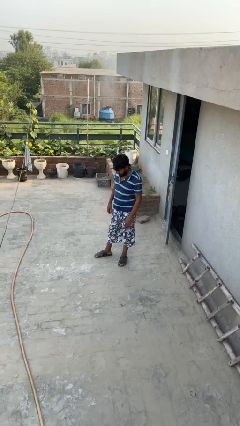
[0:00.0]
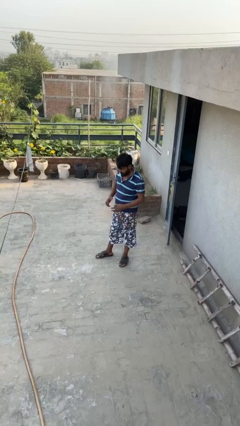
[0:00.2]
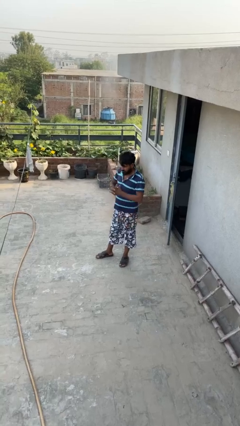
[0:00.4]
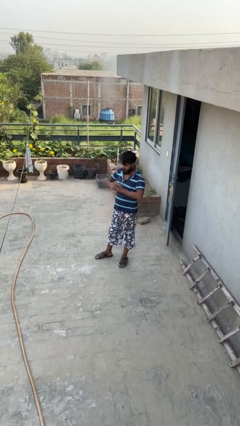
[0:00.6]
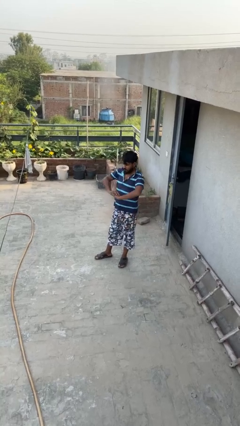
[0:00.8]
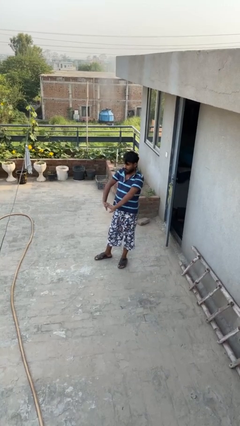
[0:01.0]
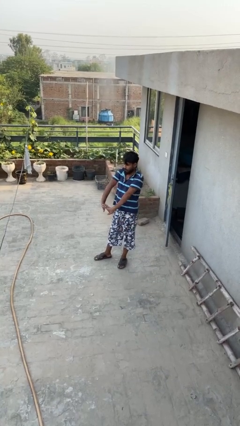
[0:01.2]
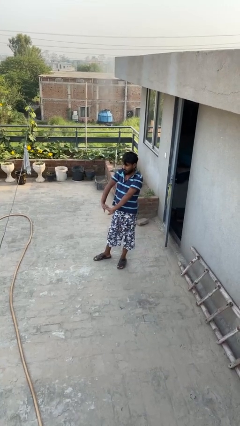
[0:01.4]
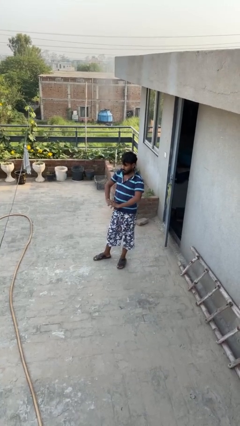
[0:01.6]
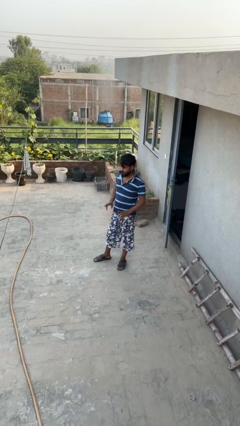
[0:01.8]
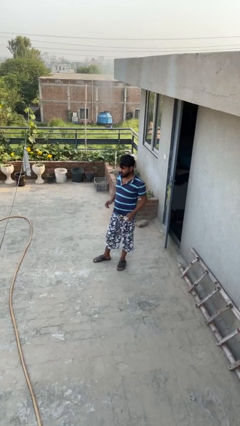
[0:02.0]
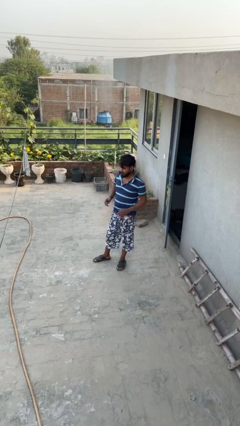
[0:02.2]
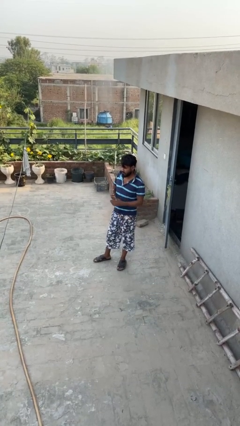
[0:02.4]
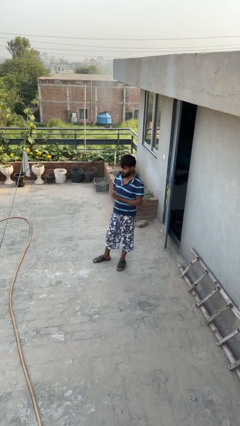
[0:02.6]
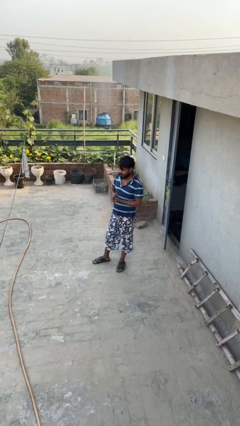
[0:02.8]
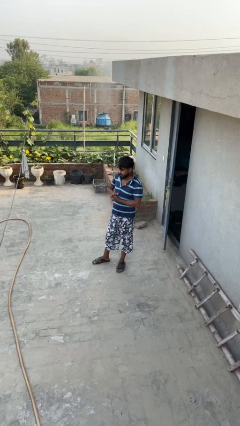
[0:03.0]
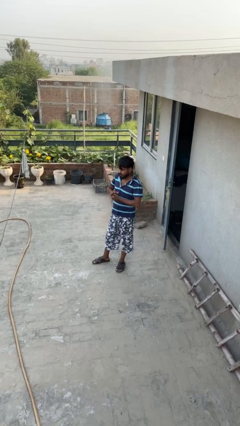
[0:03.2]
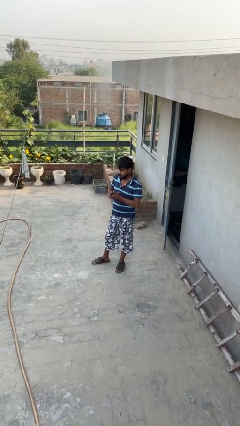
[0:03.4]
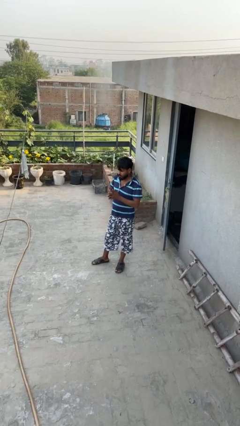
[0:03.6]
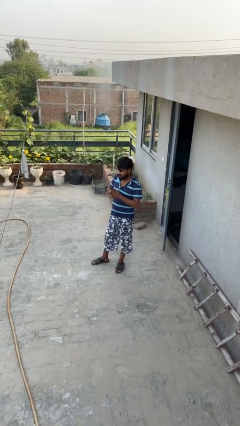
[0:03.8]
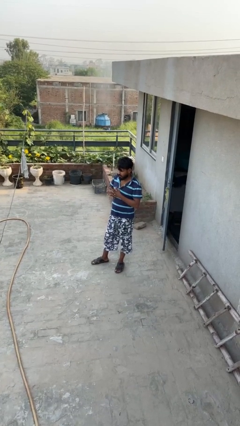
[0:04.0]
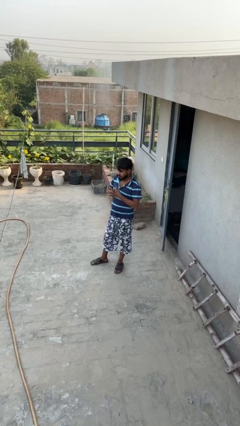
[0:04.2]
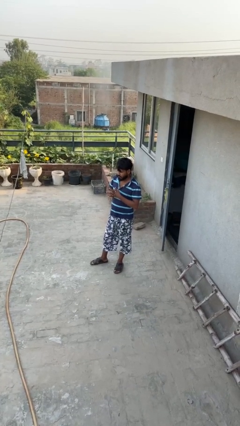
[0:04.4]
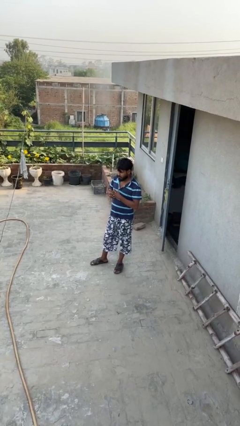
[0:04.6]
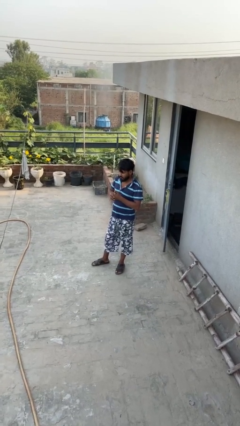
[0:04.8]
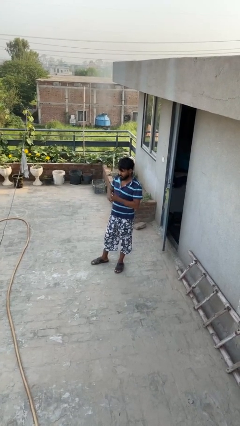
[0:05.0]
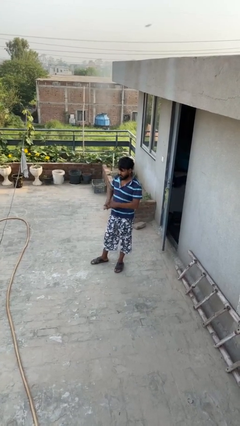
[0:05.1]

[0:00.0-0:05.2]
person cracks knuckles

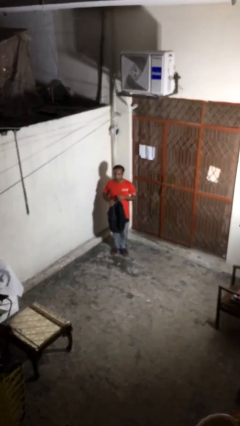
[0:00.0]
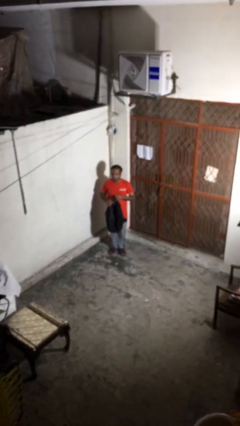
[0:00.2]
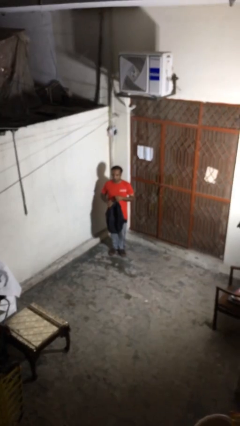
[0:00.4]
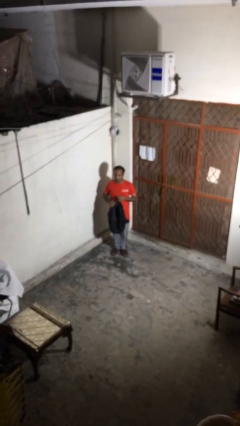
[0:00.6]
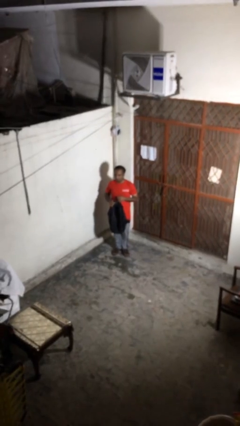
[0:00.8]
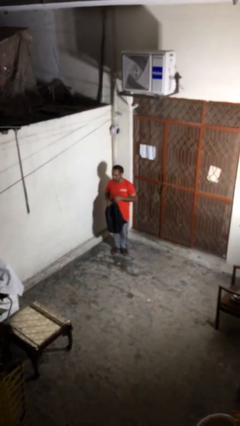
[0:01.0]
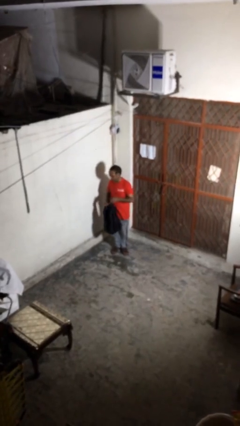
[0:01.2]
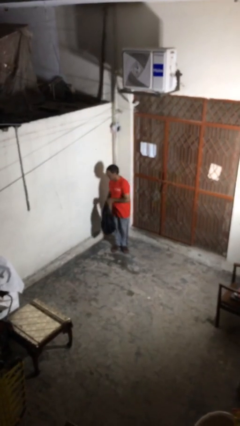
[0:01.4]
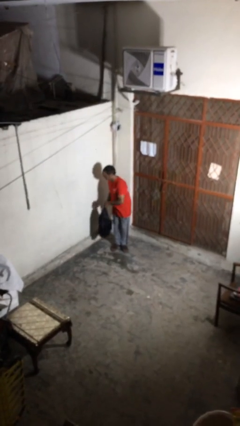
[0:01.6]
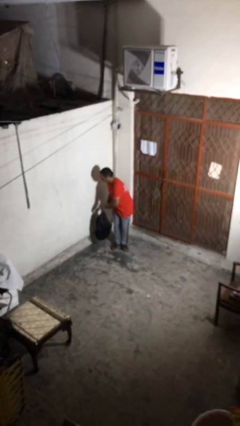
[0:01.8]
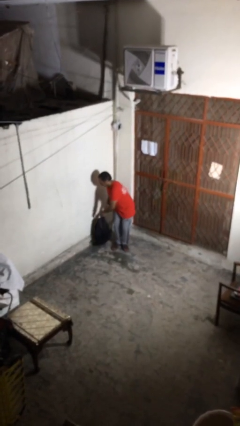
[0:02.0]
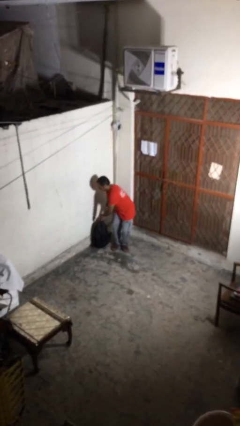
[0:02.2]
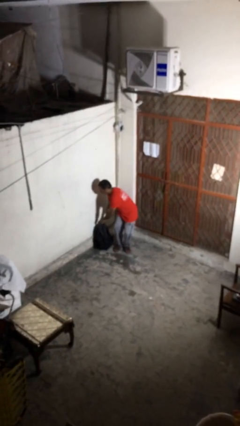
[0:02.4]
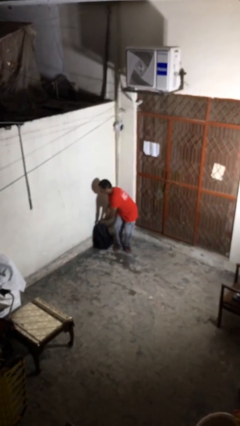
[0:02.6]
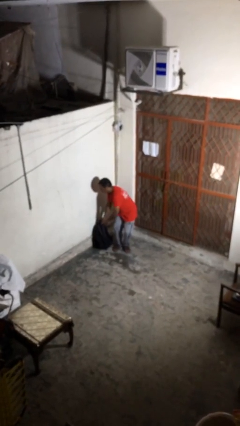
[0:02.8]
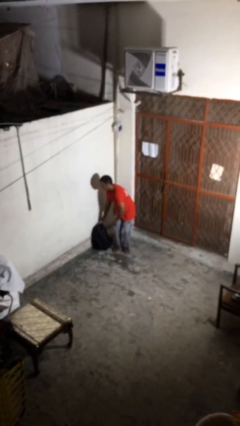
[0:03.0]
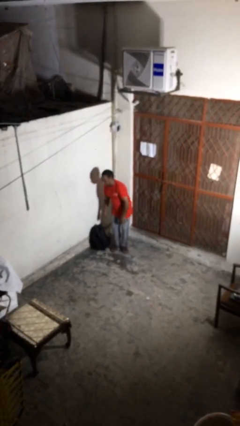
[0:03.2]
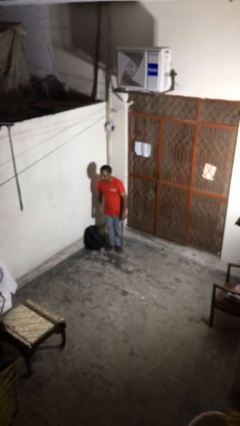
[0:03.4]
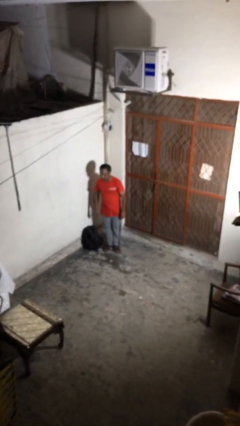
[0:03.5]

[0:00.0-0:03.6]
person puts down object on floor

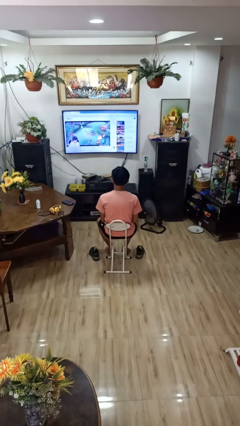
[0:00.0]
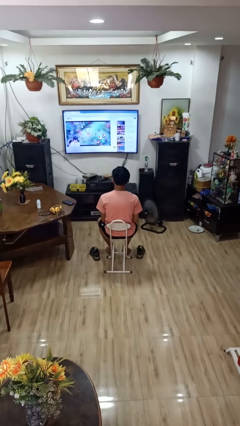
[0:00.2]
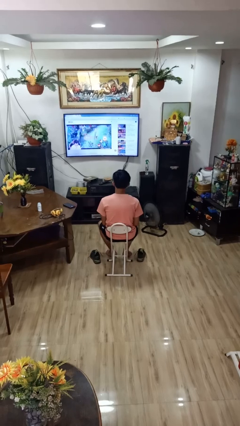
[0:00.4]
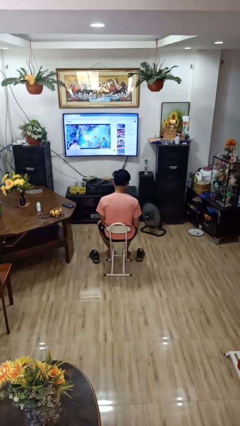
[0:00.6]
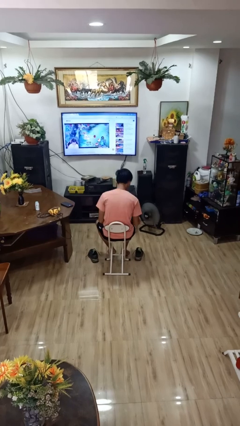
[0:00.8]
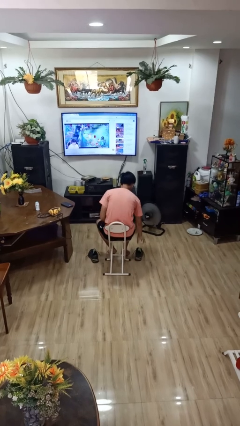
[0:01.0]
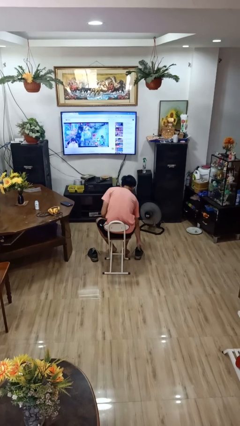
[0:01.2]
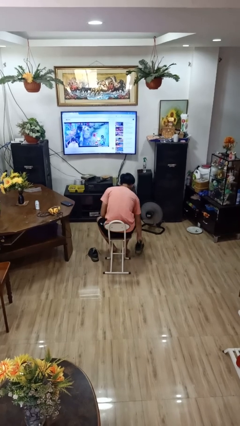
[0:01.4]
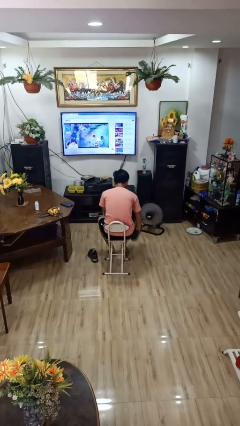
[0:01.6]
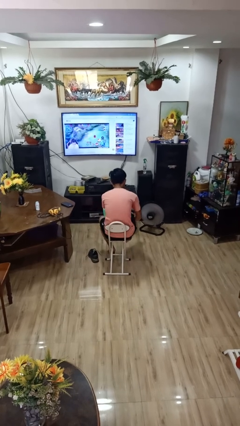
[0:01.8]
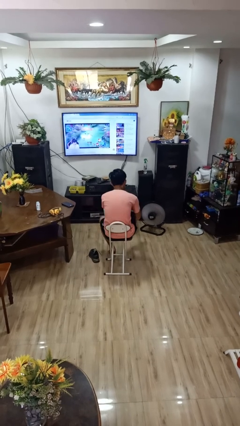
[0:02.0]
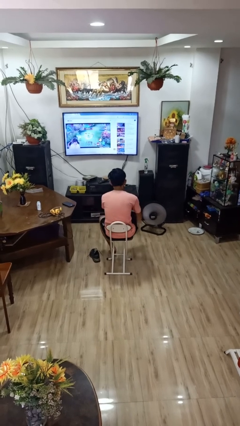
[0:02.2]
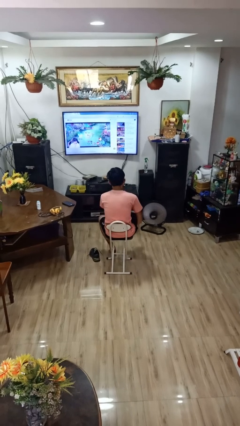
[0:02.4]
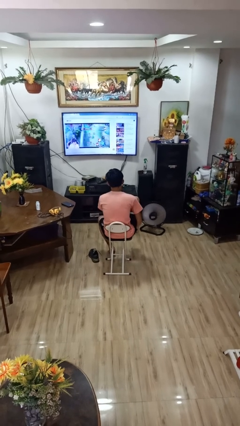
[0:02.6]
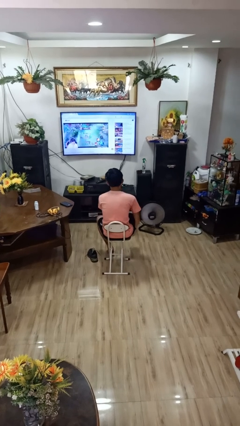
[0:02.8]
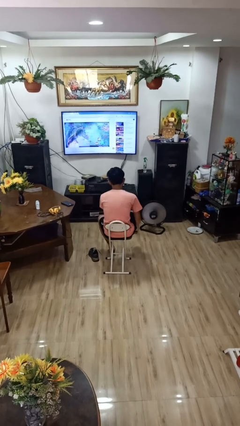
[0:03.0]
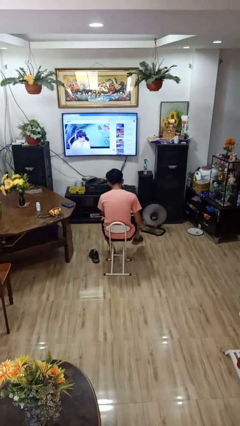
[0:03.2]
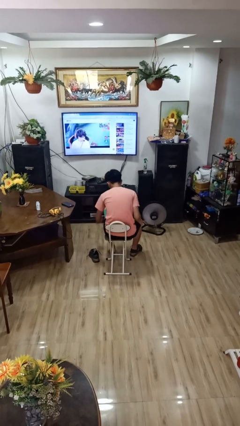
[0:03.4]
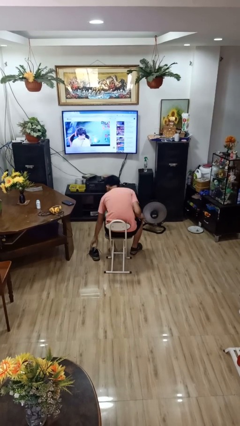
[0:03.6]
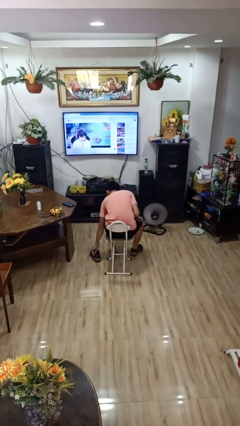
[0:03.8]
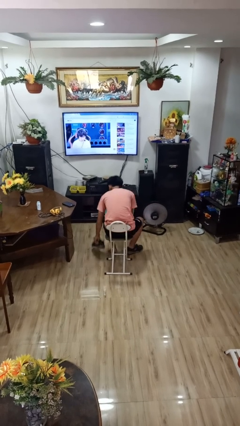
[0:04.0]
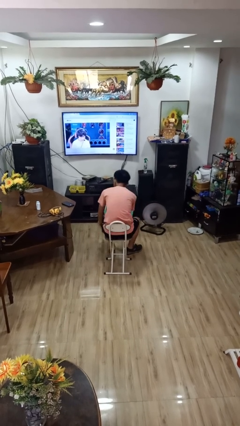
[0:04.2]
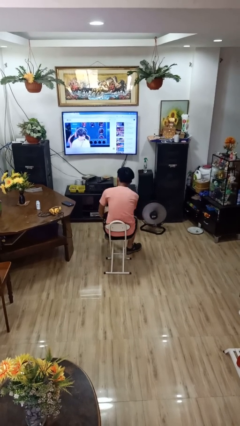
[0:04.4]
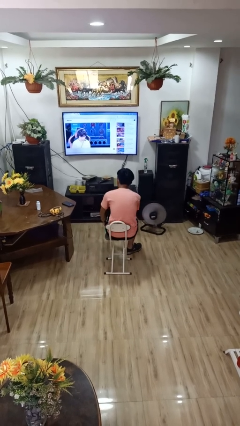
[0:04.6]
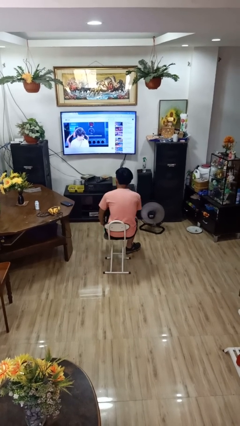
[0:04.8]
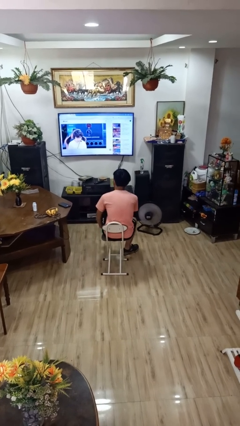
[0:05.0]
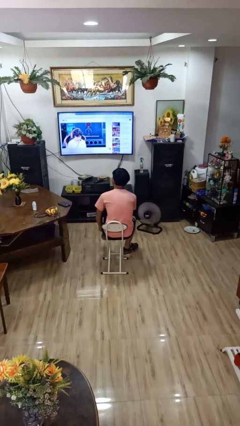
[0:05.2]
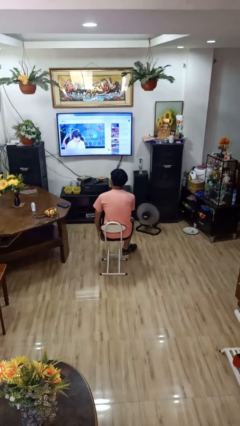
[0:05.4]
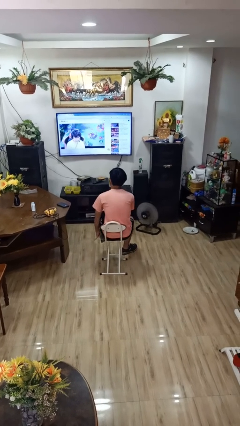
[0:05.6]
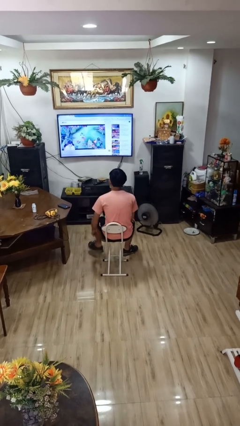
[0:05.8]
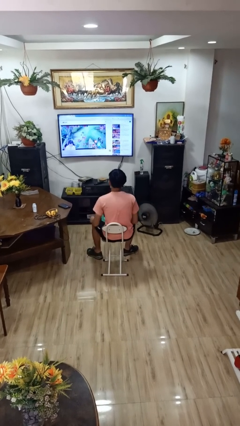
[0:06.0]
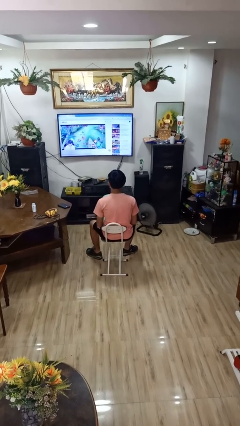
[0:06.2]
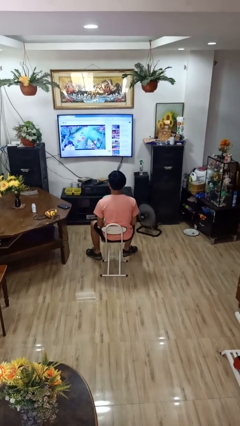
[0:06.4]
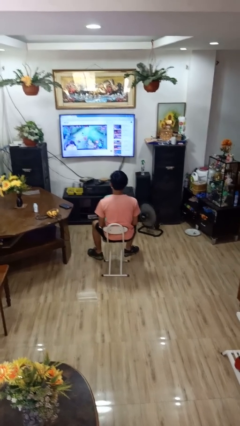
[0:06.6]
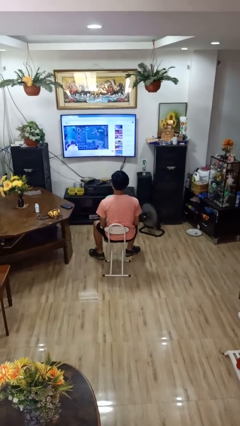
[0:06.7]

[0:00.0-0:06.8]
person puts on shoes

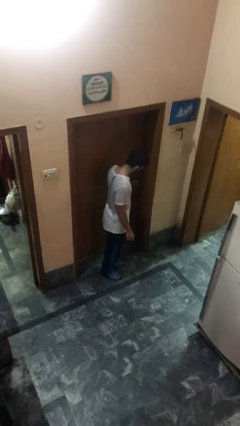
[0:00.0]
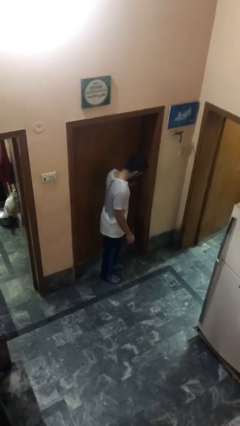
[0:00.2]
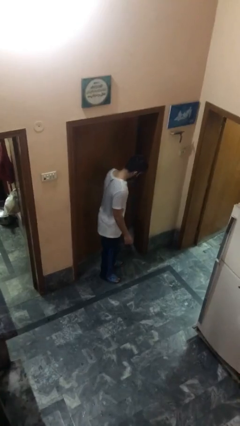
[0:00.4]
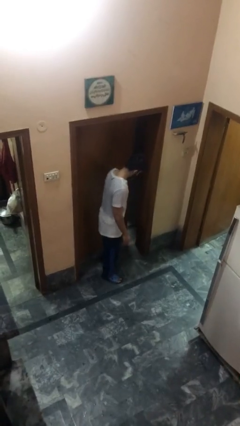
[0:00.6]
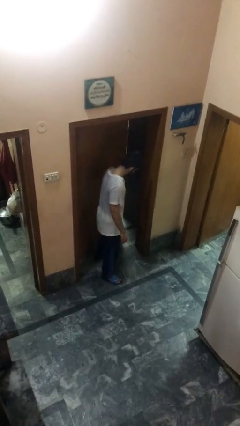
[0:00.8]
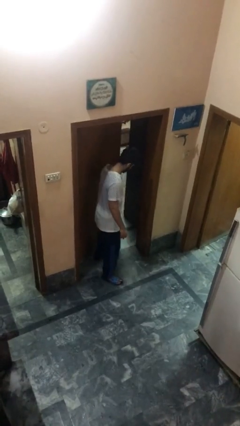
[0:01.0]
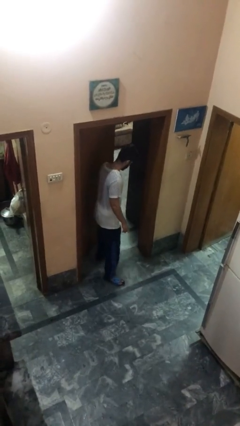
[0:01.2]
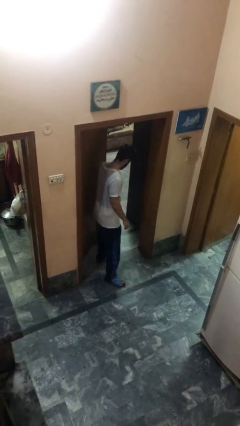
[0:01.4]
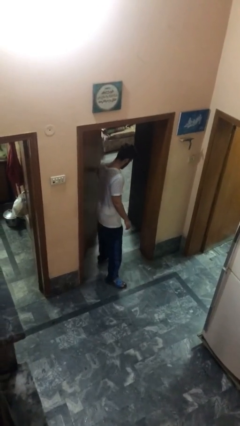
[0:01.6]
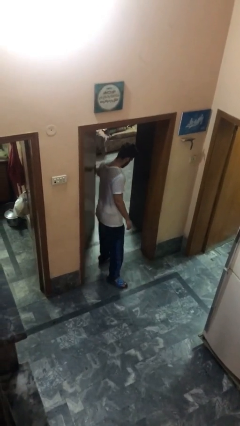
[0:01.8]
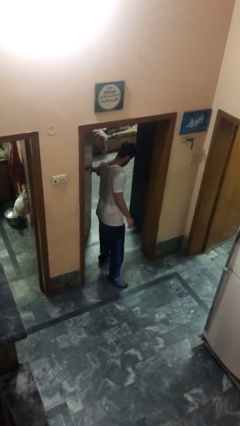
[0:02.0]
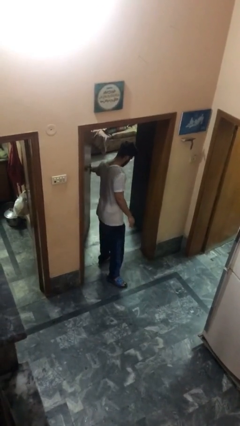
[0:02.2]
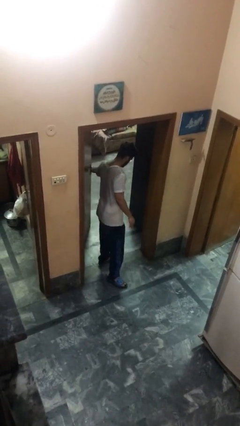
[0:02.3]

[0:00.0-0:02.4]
person opens facility door
